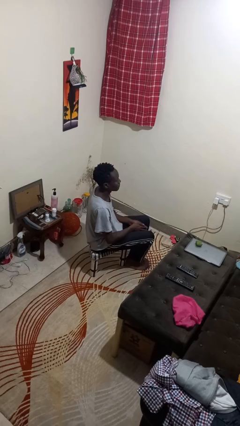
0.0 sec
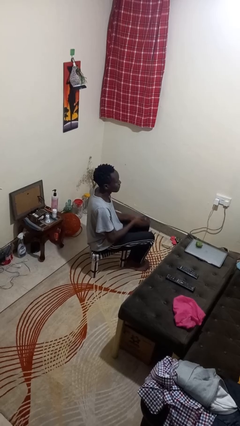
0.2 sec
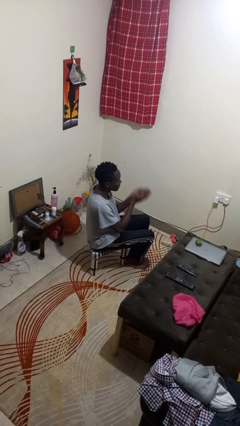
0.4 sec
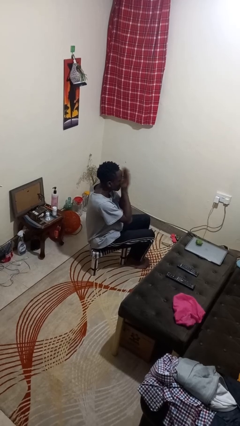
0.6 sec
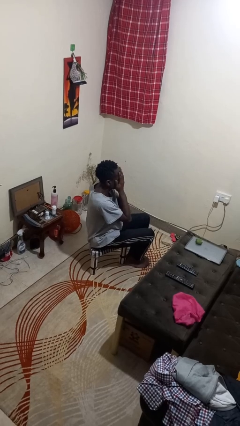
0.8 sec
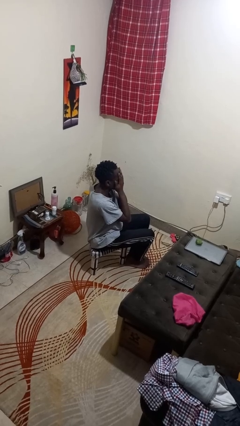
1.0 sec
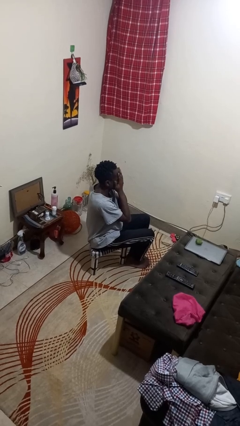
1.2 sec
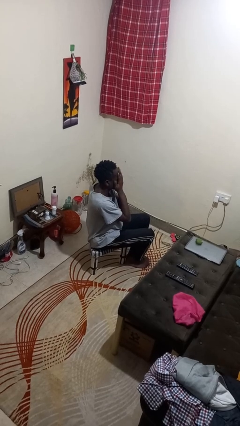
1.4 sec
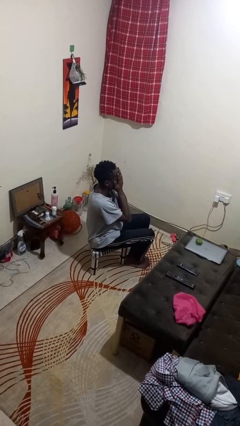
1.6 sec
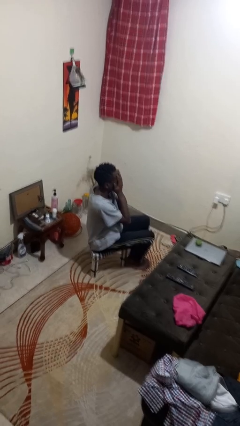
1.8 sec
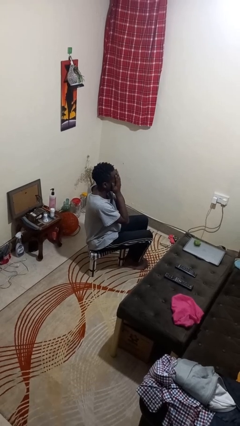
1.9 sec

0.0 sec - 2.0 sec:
person covers face with hands

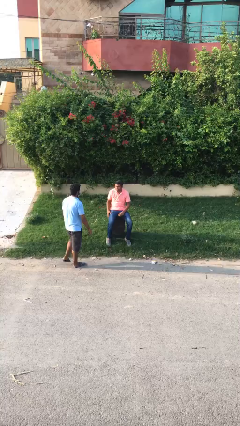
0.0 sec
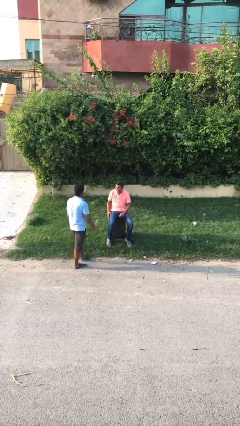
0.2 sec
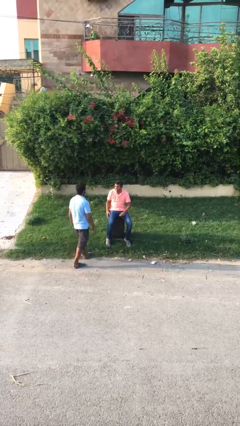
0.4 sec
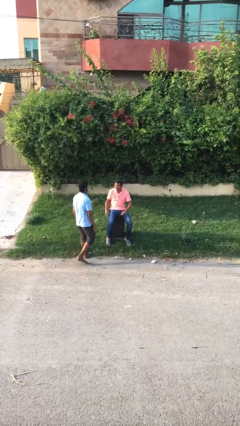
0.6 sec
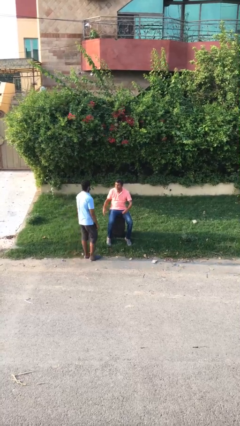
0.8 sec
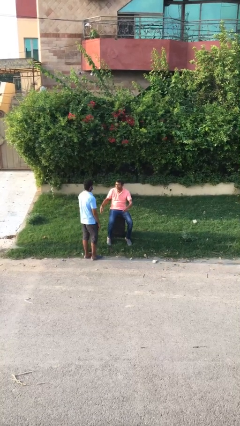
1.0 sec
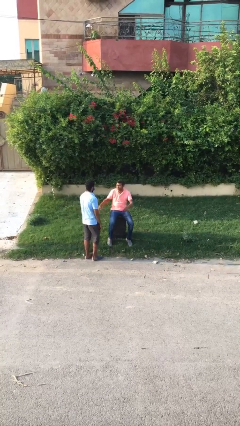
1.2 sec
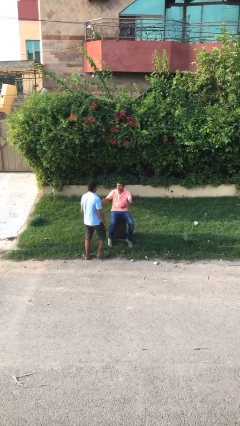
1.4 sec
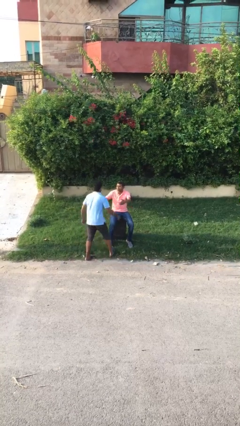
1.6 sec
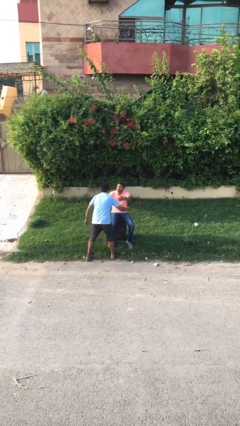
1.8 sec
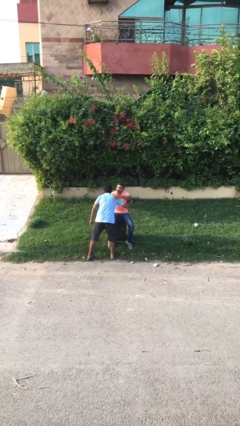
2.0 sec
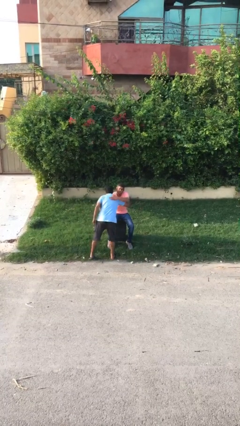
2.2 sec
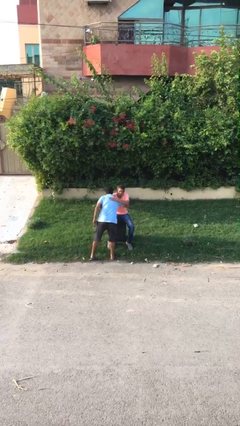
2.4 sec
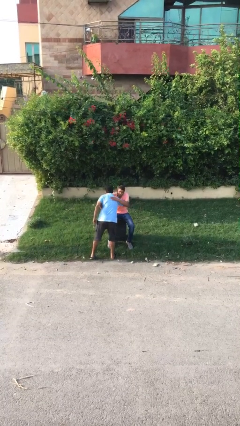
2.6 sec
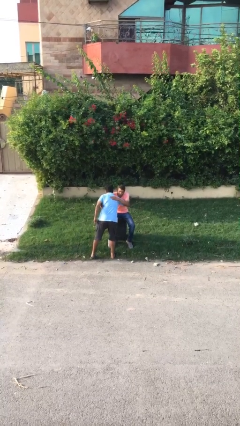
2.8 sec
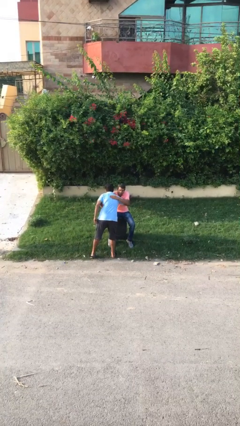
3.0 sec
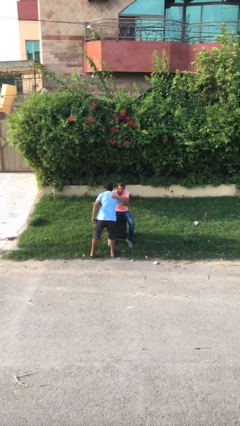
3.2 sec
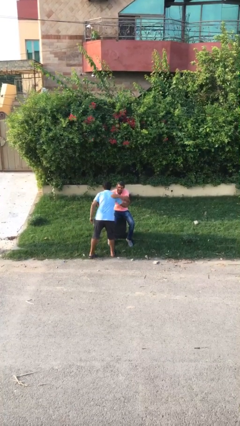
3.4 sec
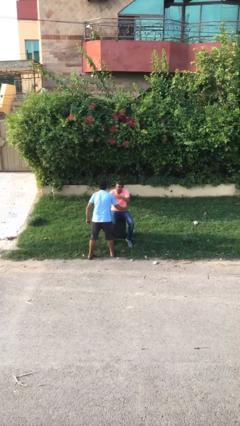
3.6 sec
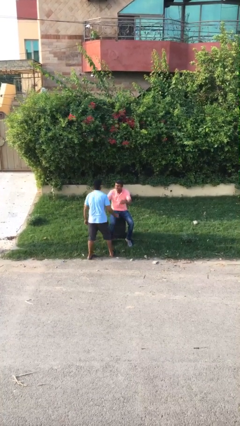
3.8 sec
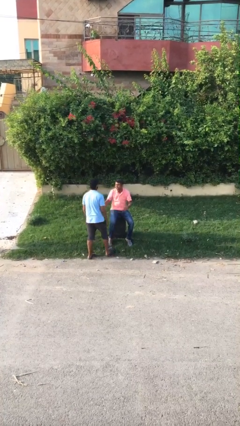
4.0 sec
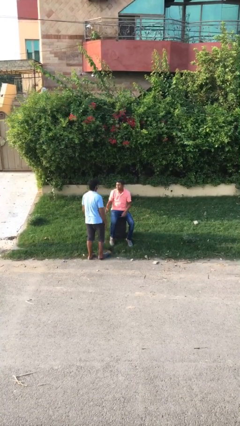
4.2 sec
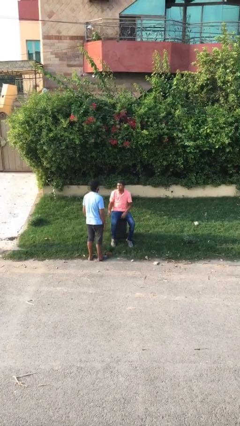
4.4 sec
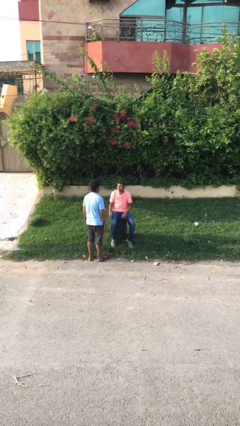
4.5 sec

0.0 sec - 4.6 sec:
person embraces person

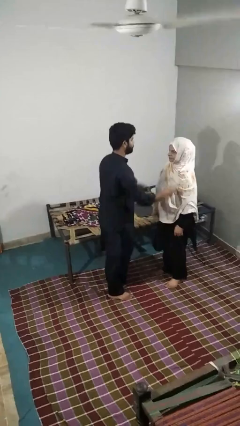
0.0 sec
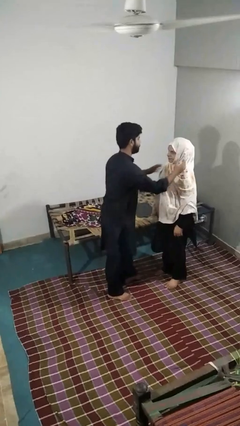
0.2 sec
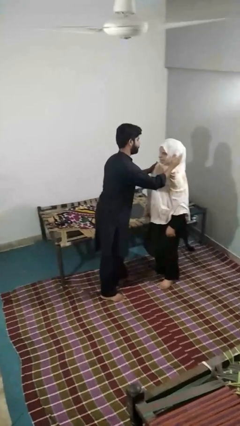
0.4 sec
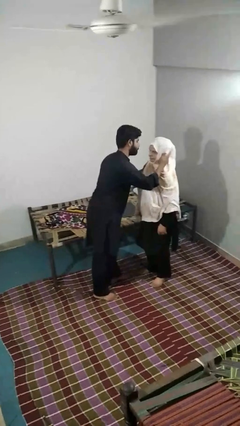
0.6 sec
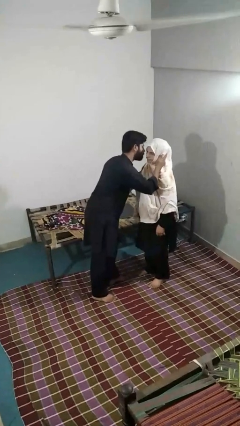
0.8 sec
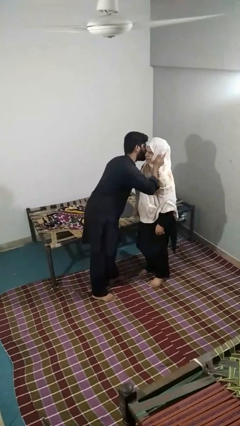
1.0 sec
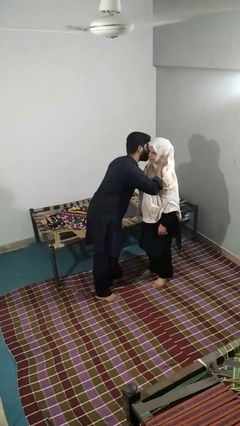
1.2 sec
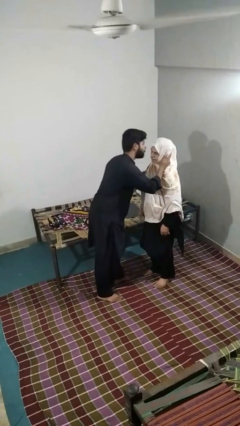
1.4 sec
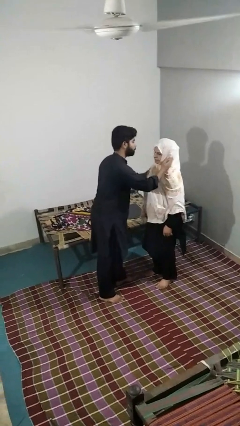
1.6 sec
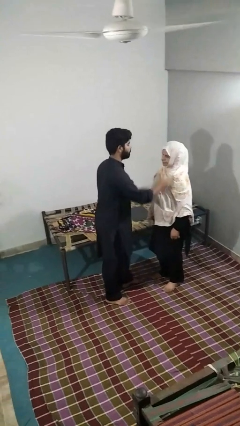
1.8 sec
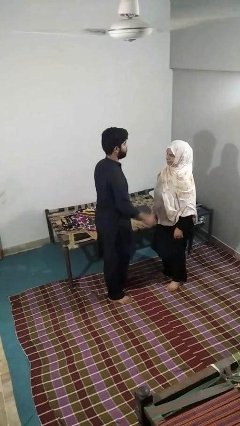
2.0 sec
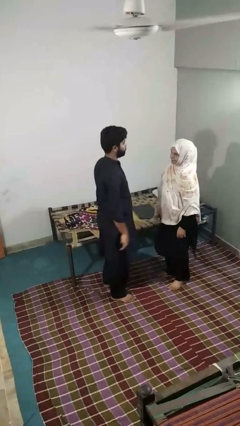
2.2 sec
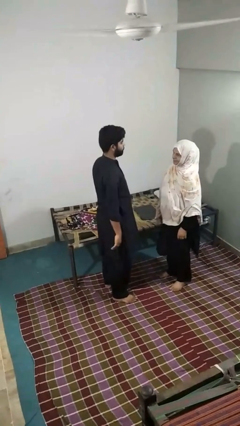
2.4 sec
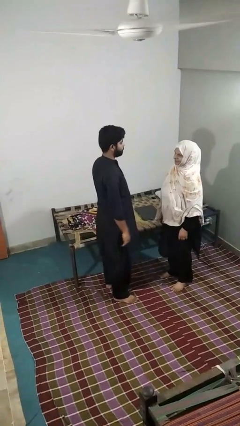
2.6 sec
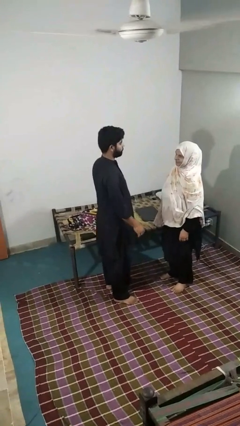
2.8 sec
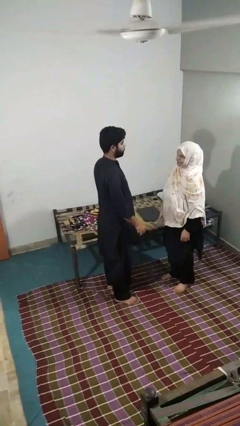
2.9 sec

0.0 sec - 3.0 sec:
person kisses cheek of person

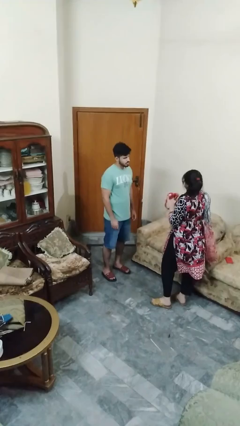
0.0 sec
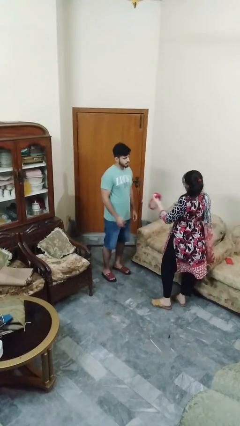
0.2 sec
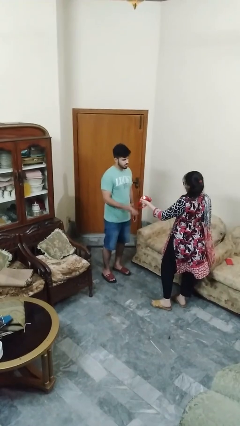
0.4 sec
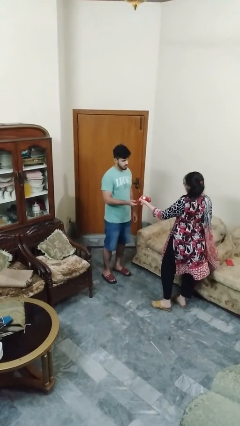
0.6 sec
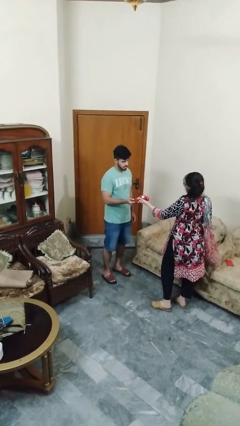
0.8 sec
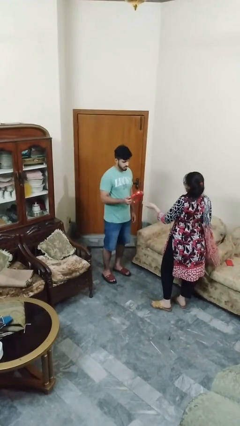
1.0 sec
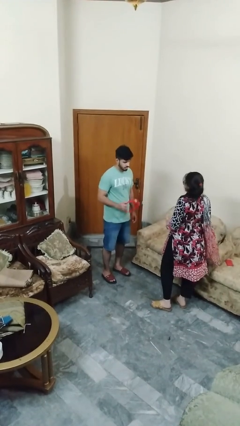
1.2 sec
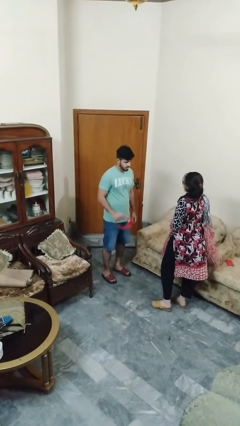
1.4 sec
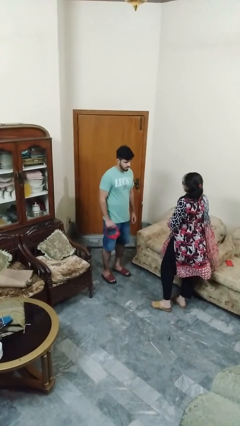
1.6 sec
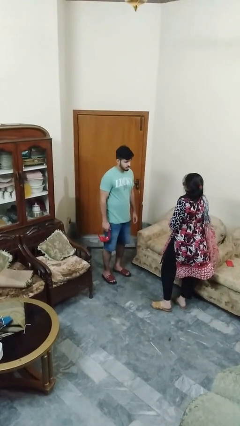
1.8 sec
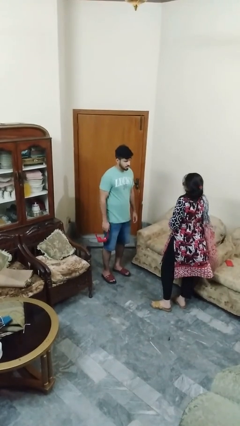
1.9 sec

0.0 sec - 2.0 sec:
person transfers object to person

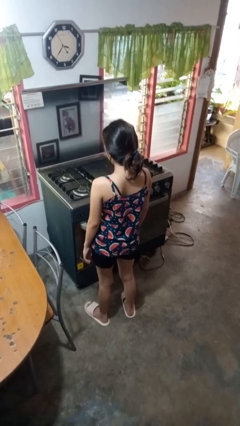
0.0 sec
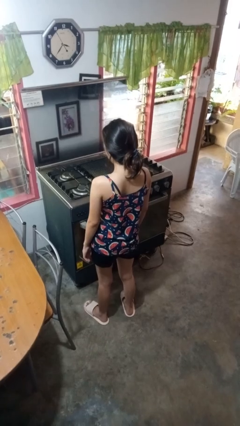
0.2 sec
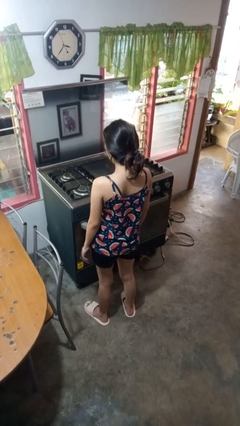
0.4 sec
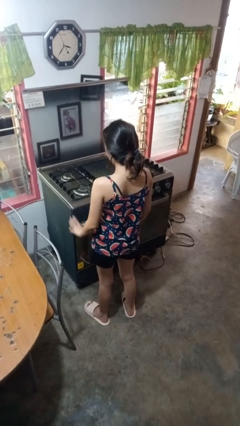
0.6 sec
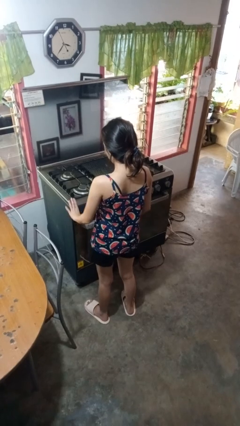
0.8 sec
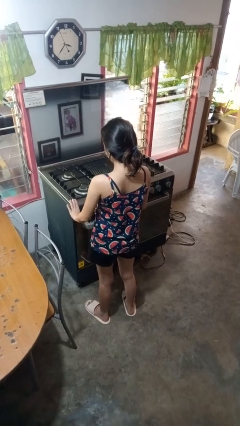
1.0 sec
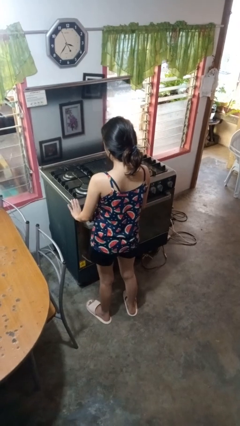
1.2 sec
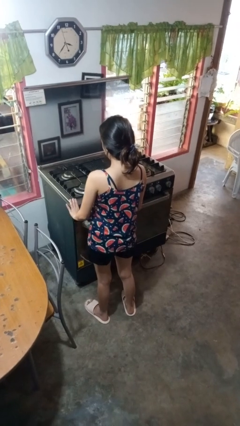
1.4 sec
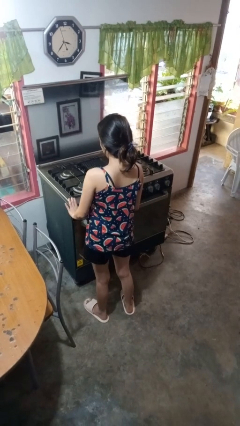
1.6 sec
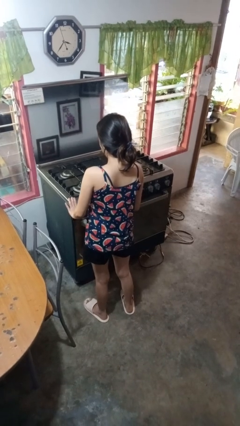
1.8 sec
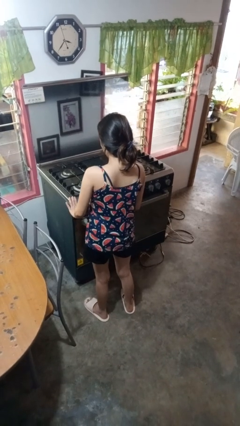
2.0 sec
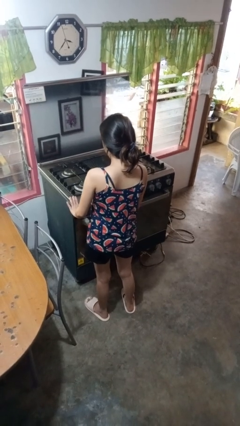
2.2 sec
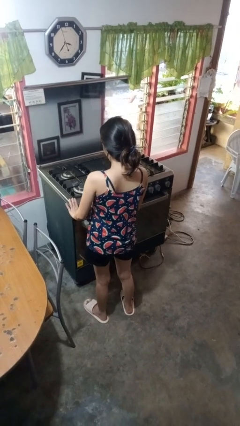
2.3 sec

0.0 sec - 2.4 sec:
person turns on stovetop

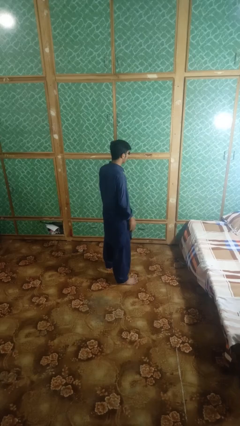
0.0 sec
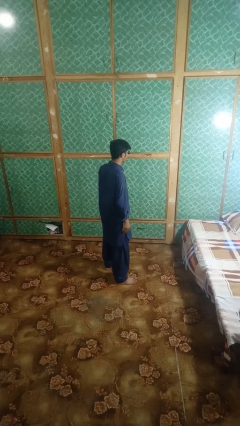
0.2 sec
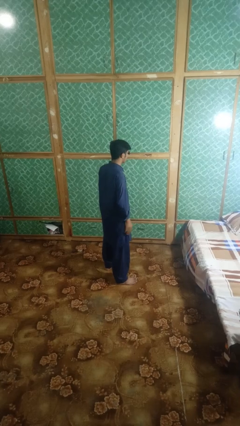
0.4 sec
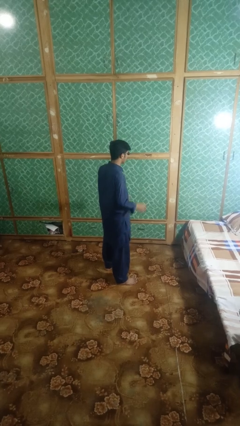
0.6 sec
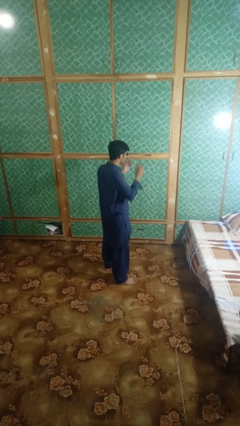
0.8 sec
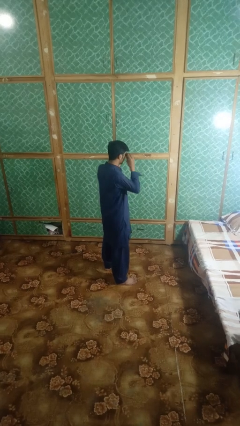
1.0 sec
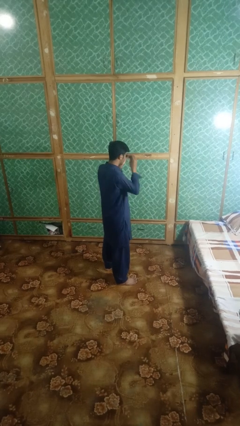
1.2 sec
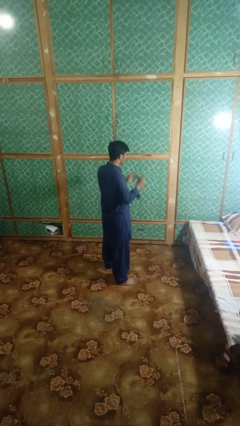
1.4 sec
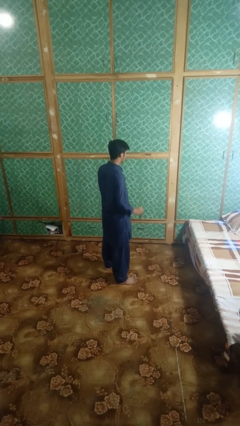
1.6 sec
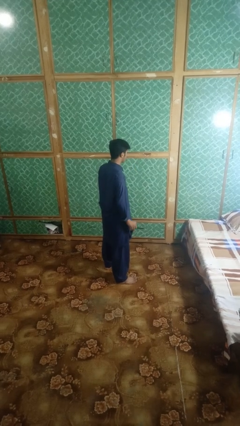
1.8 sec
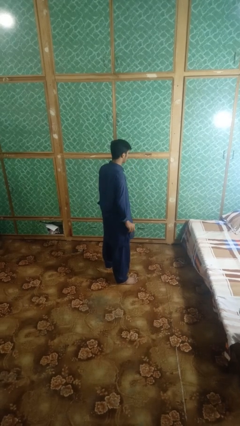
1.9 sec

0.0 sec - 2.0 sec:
person takes off sunglasses

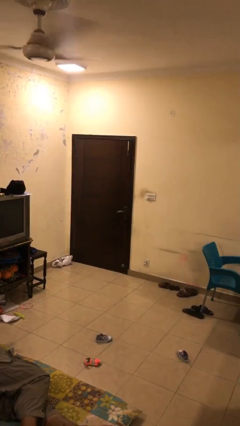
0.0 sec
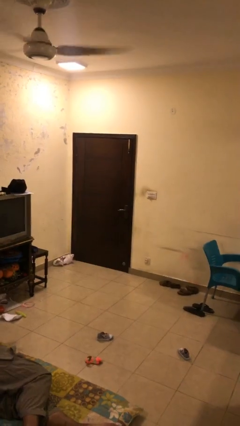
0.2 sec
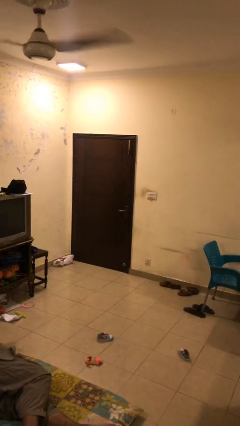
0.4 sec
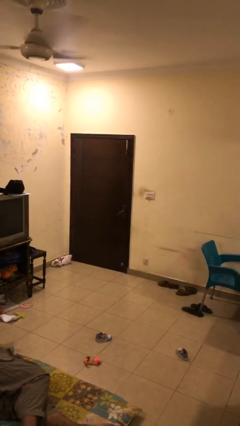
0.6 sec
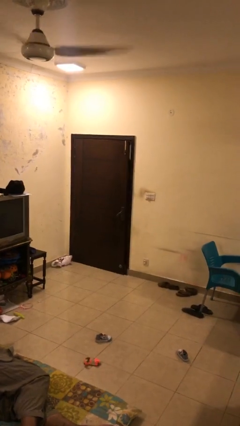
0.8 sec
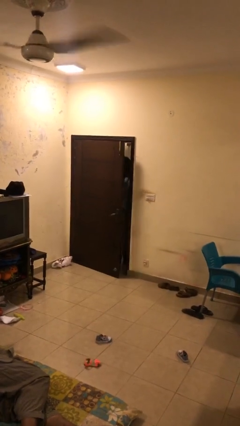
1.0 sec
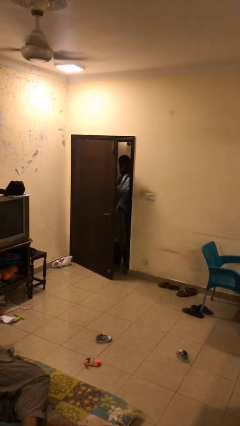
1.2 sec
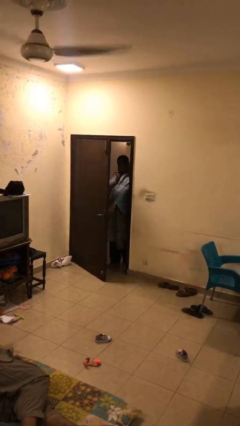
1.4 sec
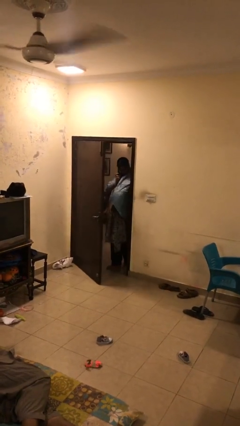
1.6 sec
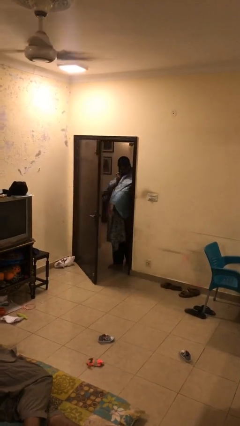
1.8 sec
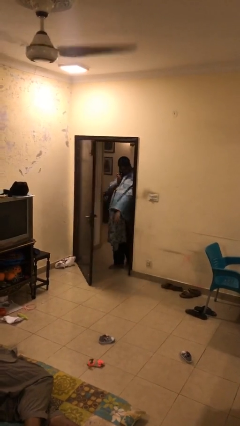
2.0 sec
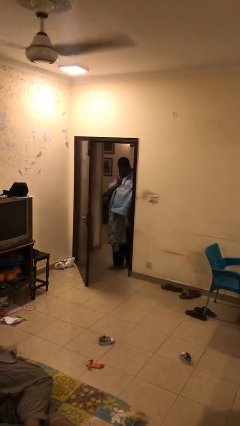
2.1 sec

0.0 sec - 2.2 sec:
person opens facility door
